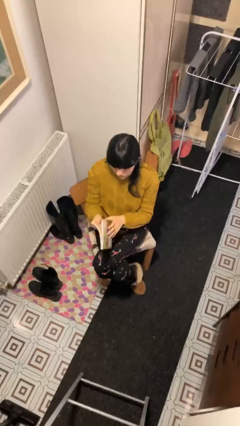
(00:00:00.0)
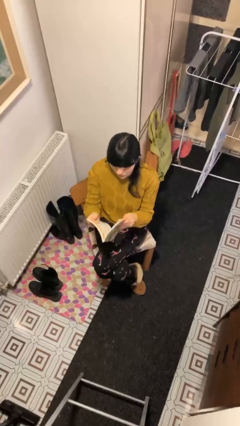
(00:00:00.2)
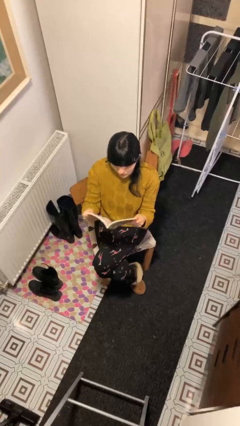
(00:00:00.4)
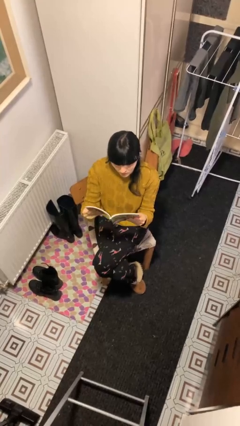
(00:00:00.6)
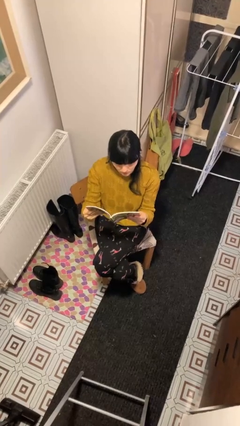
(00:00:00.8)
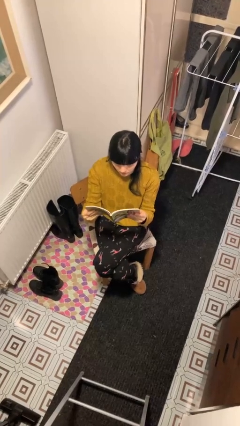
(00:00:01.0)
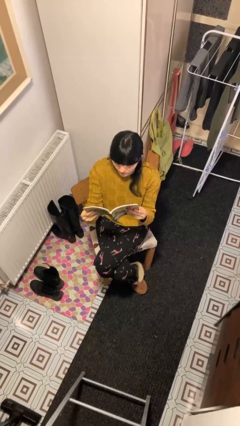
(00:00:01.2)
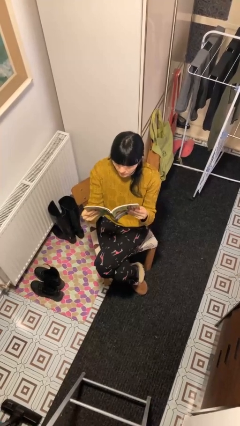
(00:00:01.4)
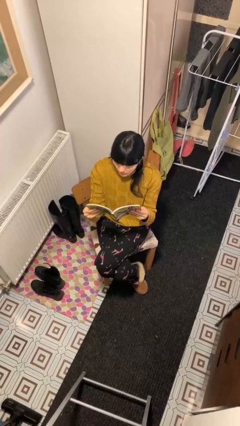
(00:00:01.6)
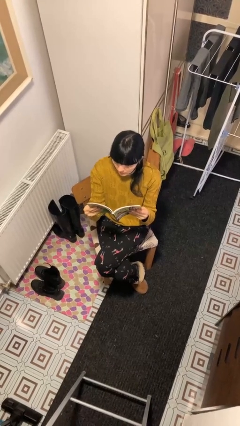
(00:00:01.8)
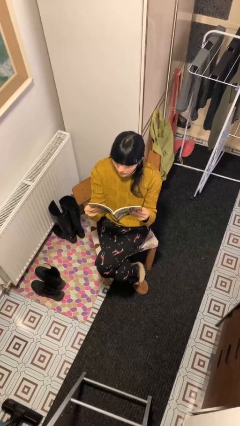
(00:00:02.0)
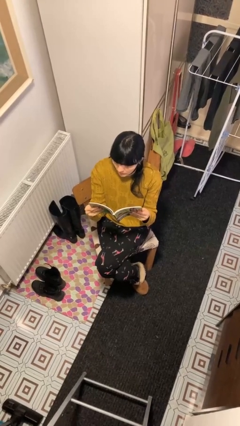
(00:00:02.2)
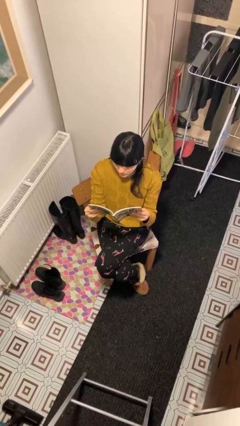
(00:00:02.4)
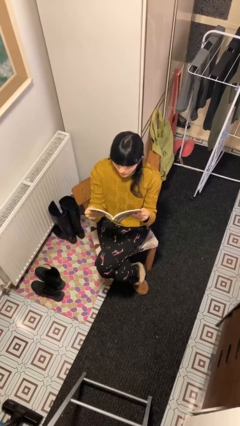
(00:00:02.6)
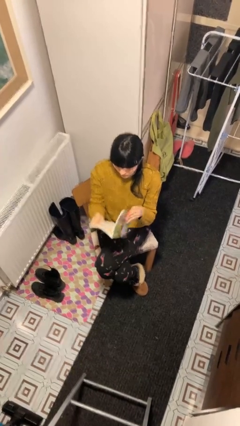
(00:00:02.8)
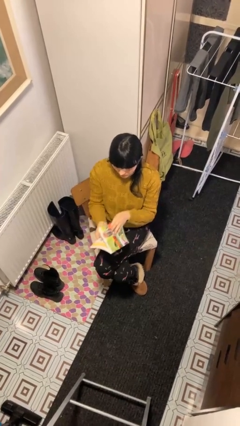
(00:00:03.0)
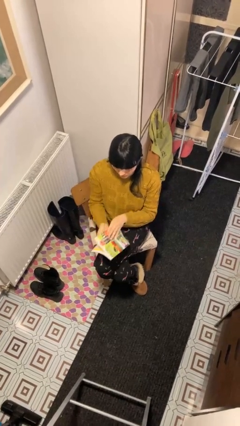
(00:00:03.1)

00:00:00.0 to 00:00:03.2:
person reads document

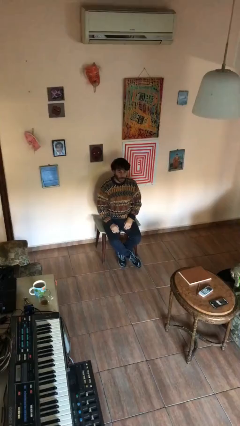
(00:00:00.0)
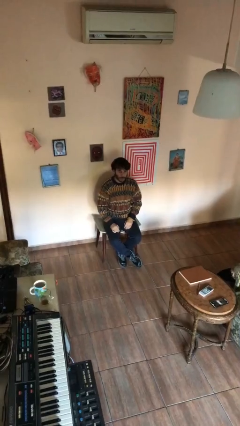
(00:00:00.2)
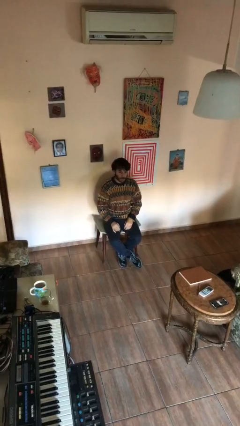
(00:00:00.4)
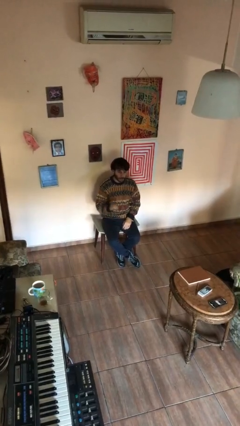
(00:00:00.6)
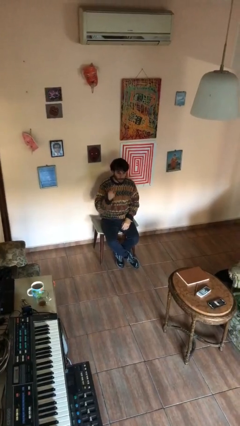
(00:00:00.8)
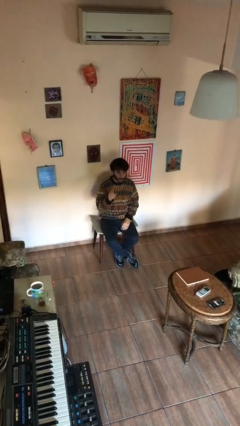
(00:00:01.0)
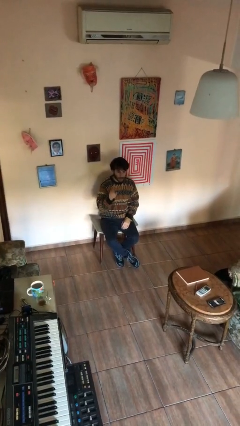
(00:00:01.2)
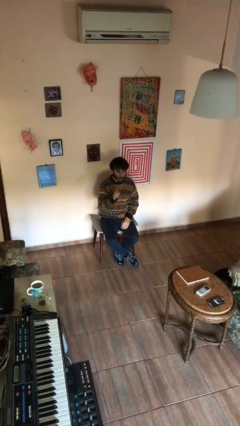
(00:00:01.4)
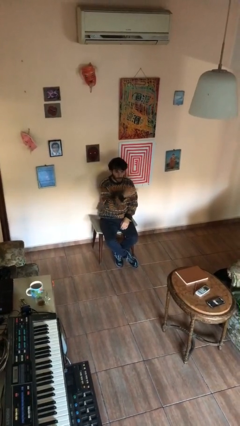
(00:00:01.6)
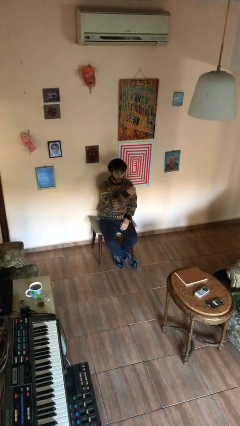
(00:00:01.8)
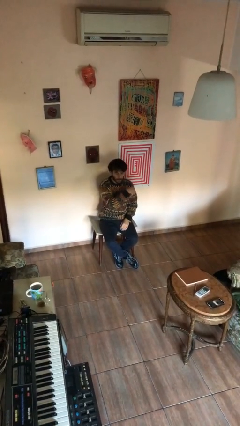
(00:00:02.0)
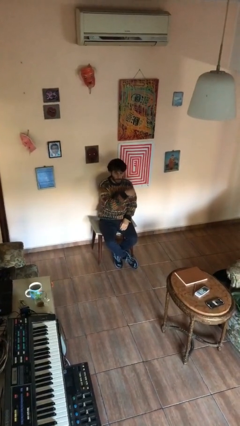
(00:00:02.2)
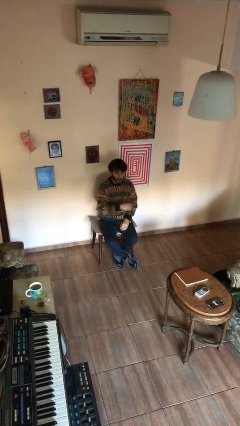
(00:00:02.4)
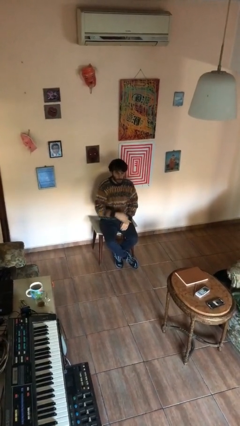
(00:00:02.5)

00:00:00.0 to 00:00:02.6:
person gestures swipe left

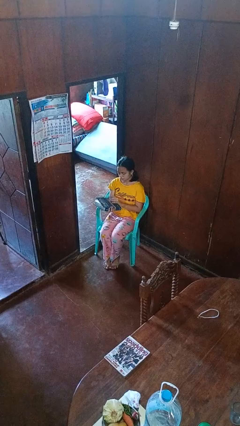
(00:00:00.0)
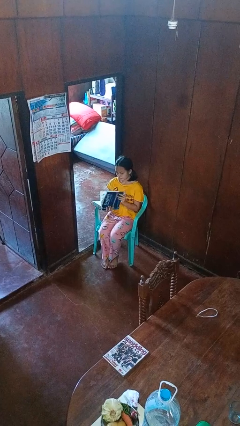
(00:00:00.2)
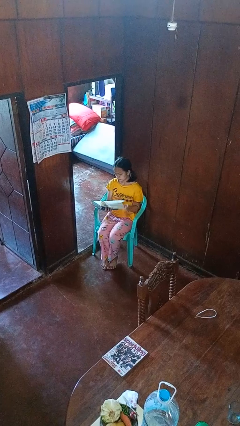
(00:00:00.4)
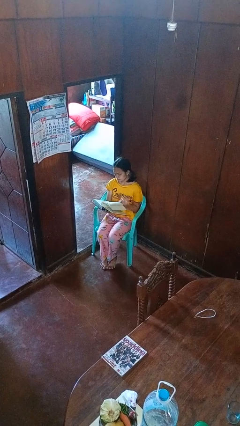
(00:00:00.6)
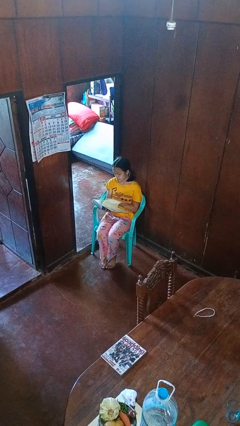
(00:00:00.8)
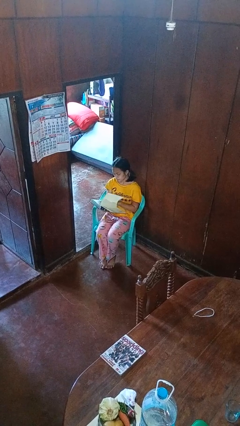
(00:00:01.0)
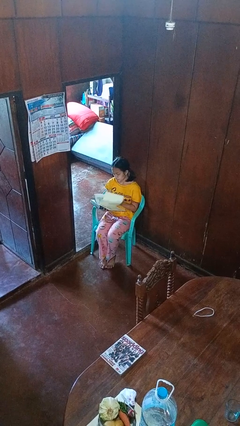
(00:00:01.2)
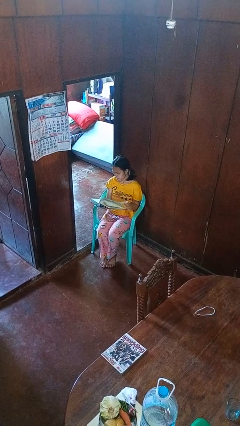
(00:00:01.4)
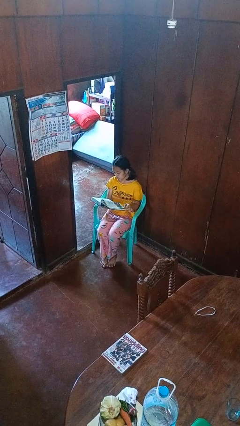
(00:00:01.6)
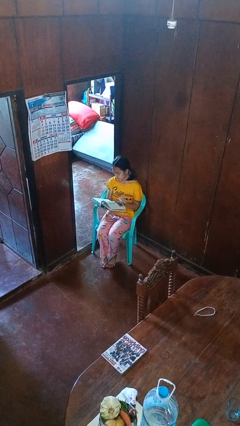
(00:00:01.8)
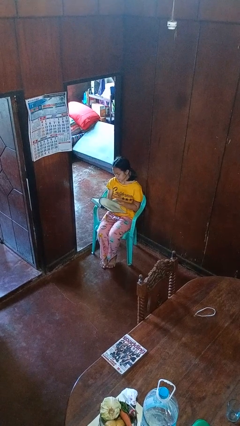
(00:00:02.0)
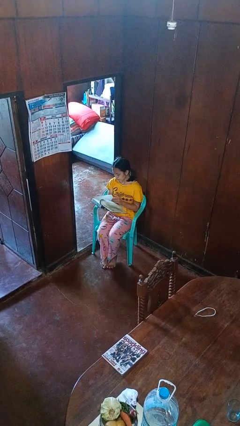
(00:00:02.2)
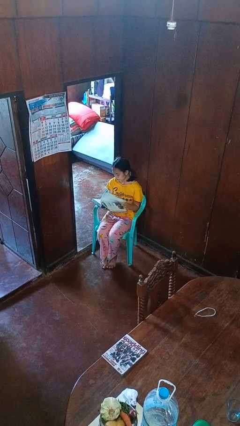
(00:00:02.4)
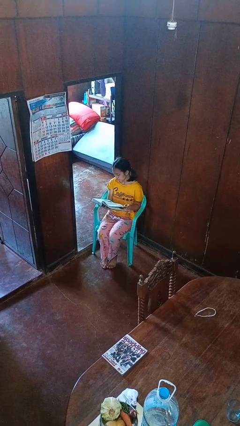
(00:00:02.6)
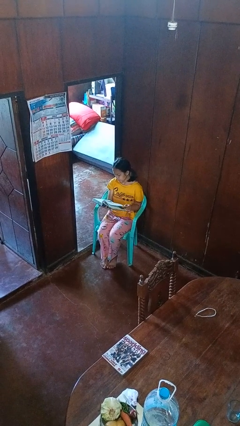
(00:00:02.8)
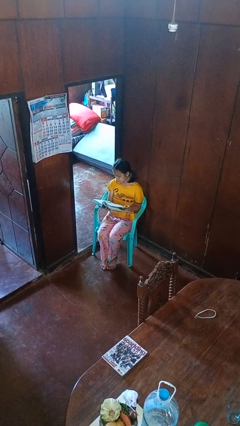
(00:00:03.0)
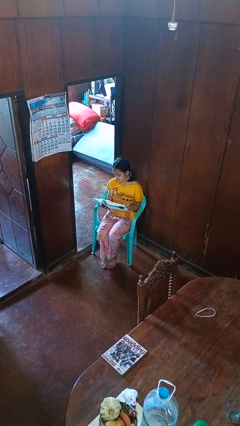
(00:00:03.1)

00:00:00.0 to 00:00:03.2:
person reads book

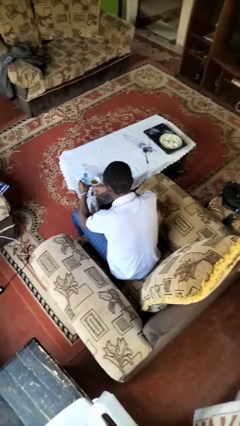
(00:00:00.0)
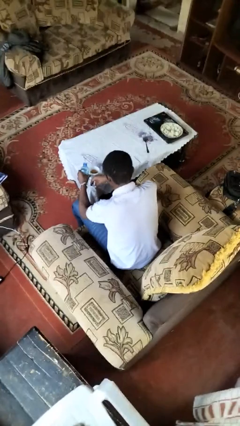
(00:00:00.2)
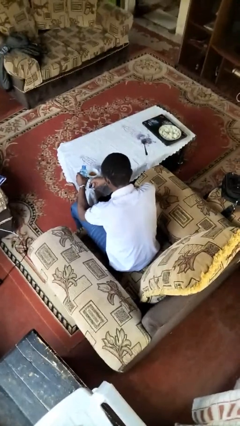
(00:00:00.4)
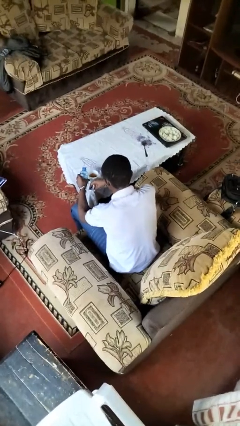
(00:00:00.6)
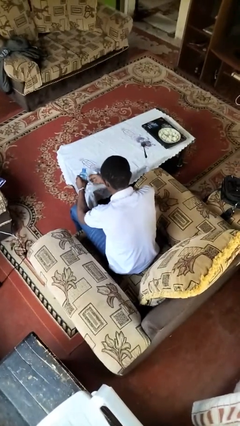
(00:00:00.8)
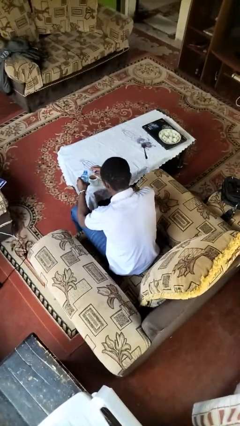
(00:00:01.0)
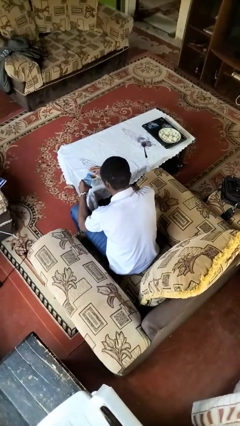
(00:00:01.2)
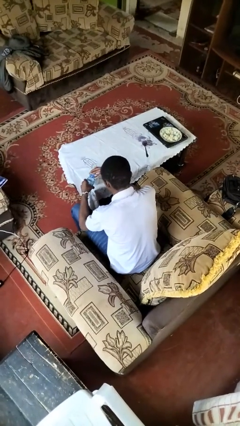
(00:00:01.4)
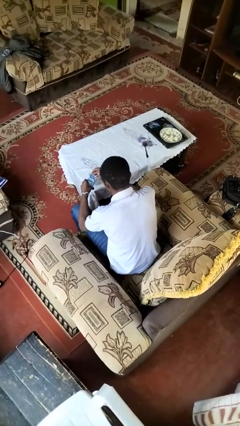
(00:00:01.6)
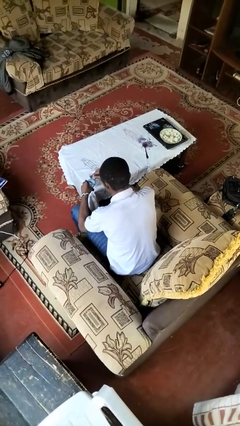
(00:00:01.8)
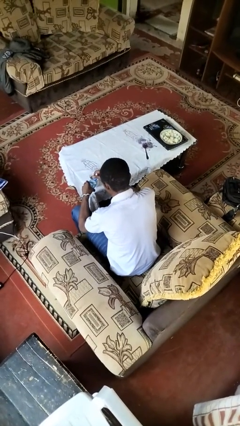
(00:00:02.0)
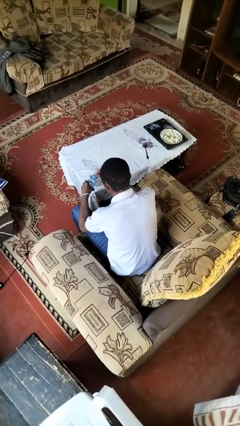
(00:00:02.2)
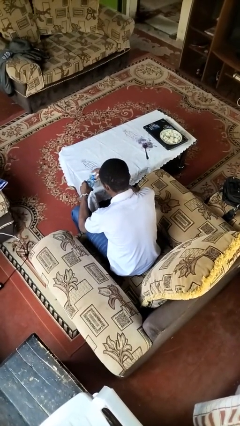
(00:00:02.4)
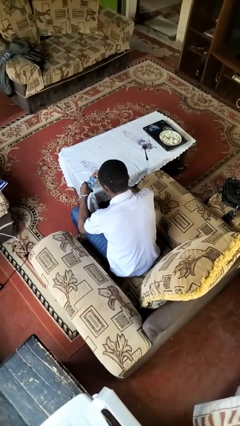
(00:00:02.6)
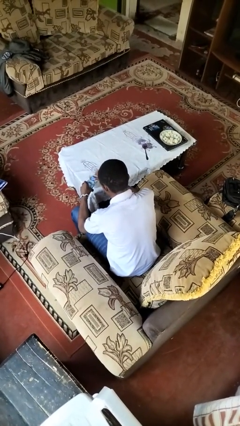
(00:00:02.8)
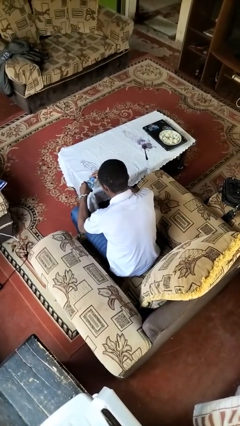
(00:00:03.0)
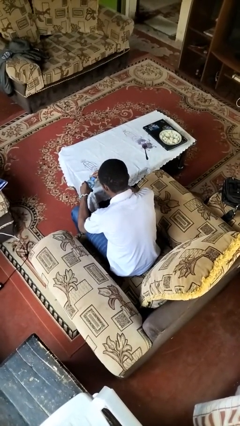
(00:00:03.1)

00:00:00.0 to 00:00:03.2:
person screws lid to bottle

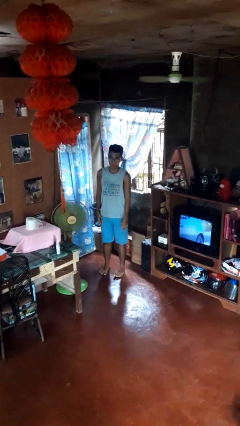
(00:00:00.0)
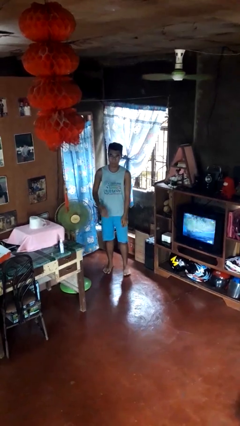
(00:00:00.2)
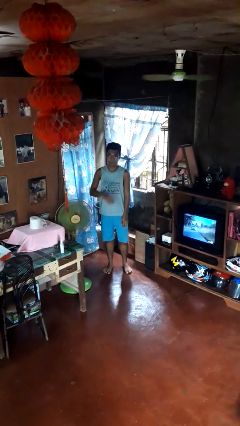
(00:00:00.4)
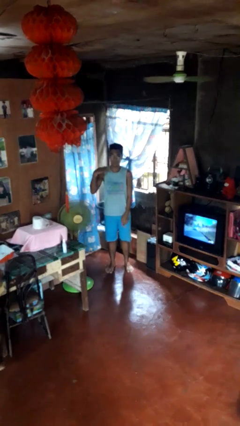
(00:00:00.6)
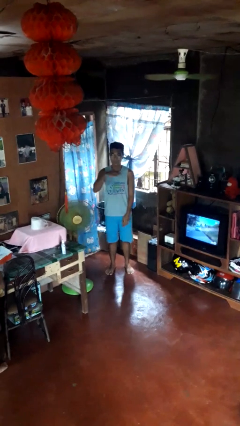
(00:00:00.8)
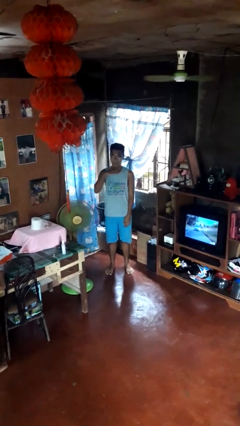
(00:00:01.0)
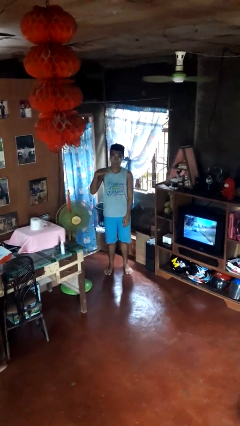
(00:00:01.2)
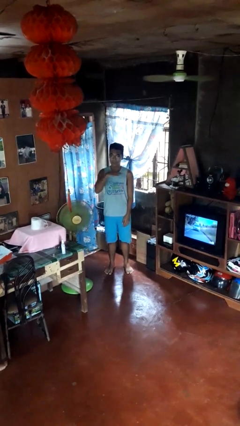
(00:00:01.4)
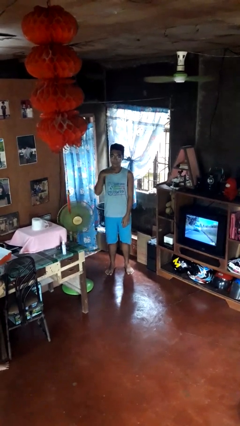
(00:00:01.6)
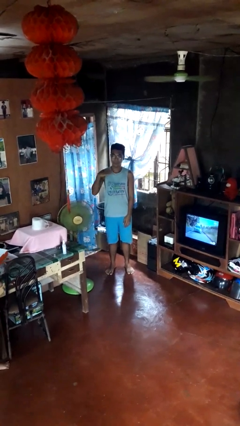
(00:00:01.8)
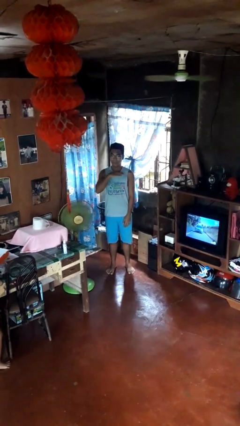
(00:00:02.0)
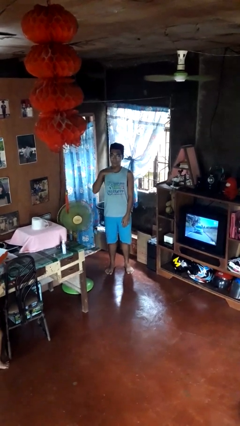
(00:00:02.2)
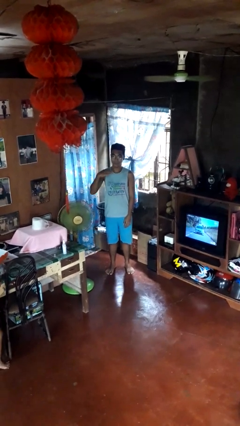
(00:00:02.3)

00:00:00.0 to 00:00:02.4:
person gestures cut

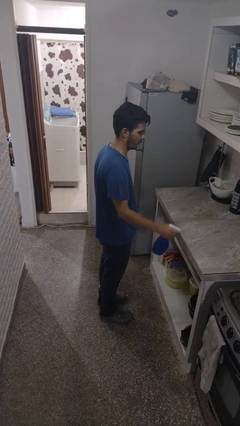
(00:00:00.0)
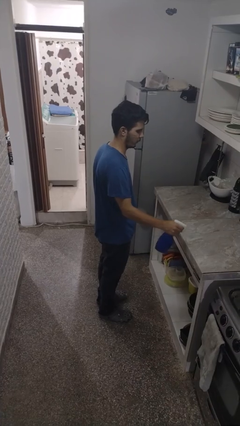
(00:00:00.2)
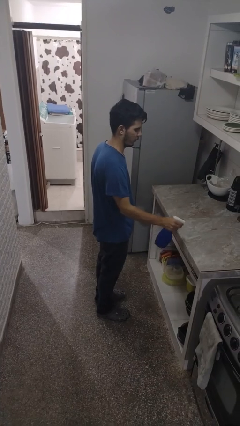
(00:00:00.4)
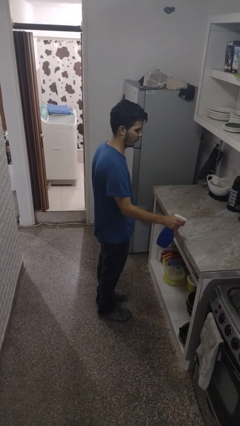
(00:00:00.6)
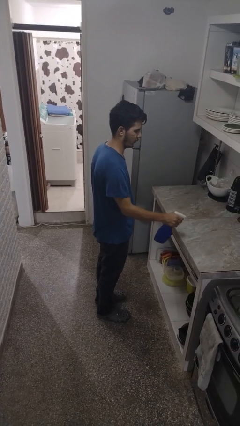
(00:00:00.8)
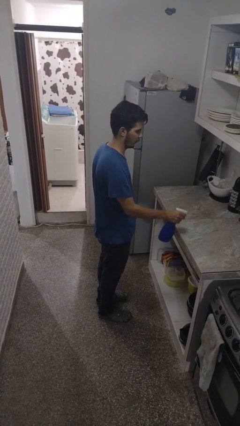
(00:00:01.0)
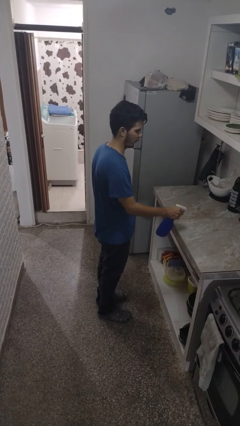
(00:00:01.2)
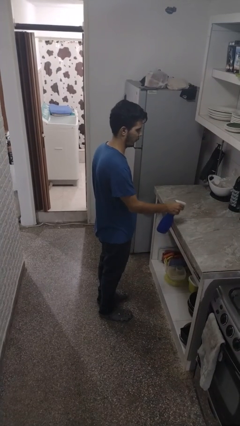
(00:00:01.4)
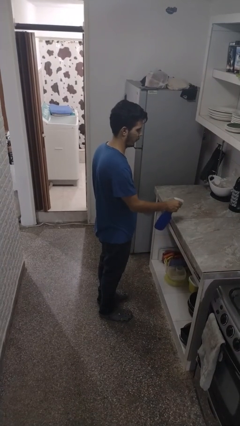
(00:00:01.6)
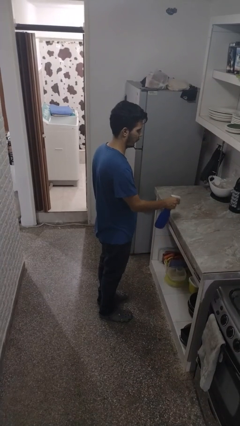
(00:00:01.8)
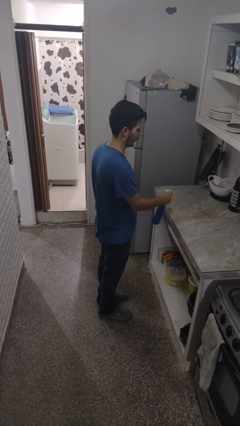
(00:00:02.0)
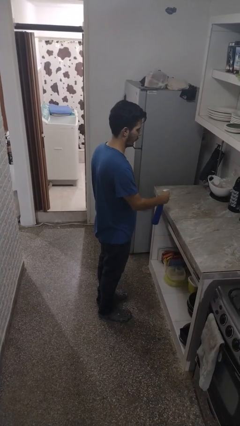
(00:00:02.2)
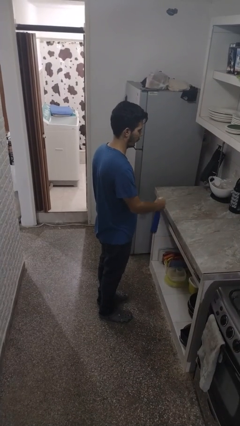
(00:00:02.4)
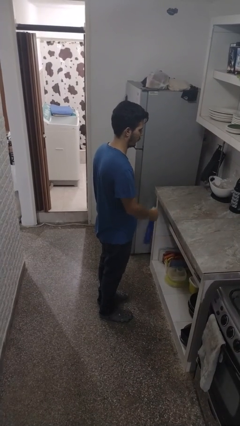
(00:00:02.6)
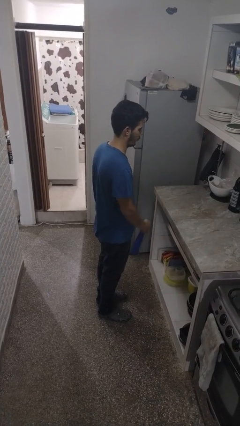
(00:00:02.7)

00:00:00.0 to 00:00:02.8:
person sprays from bottle
